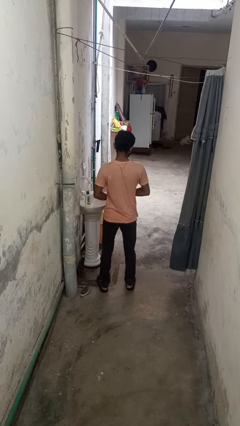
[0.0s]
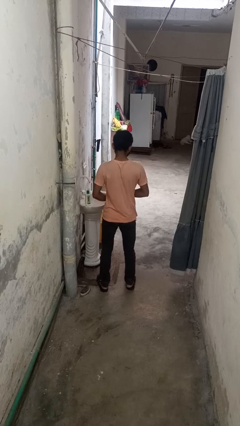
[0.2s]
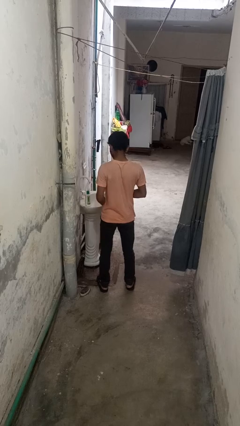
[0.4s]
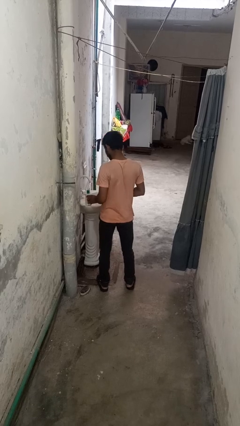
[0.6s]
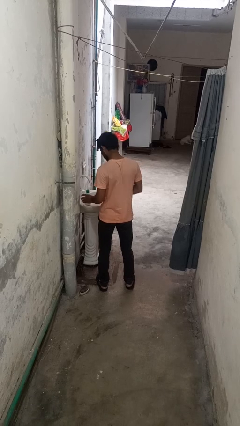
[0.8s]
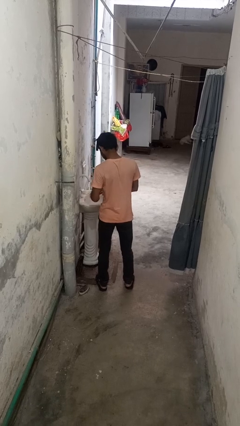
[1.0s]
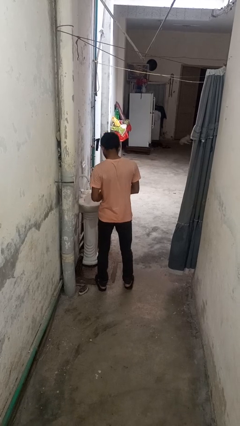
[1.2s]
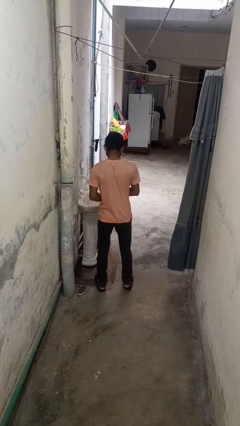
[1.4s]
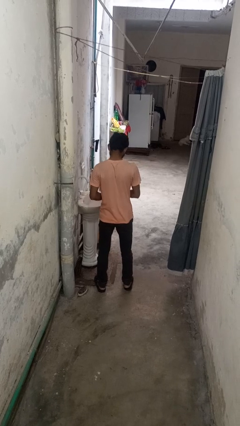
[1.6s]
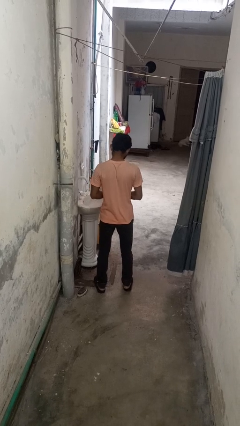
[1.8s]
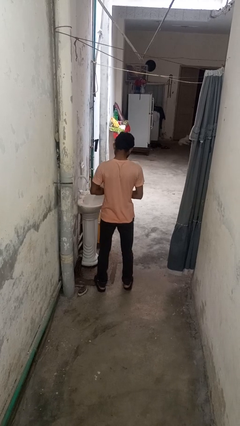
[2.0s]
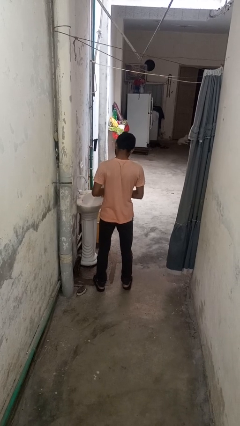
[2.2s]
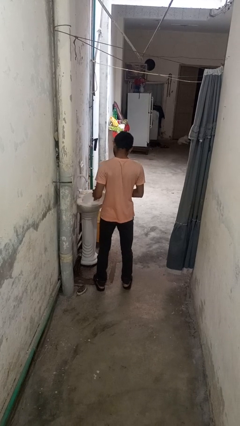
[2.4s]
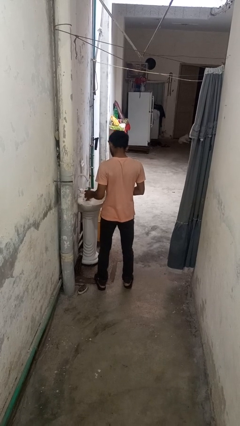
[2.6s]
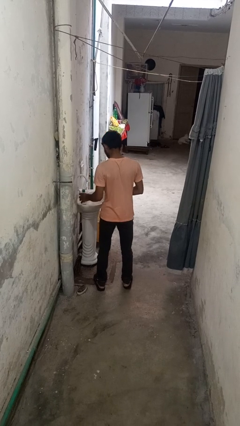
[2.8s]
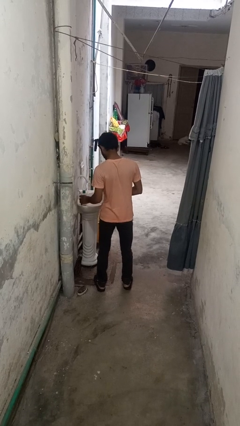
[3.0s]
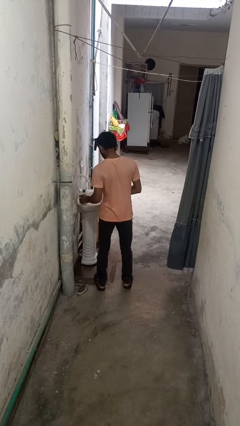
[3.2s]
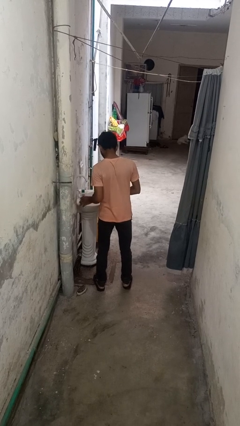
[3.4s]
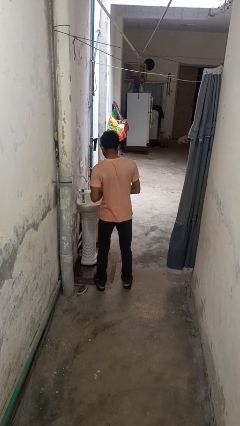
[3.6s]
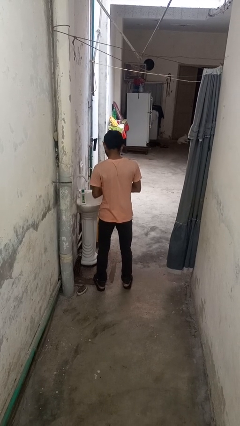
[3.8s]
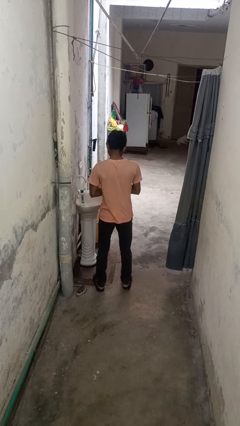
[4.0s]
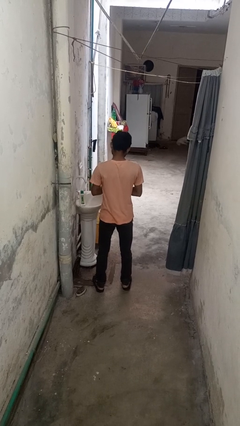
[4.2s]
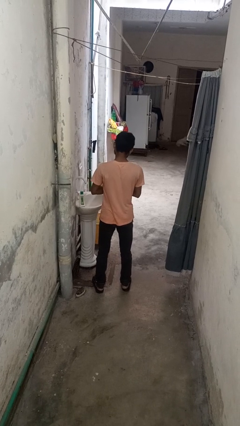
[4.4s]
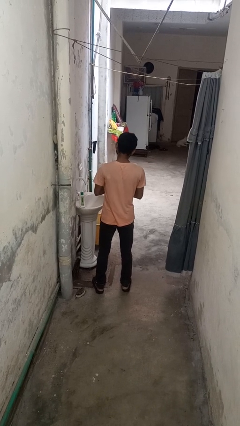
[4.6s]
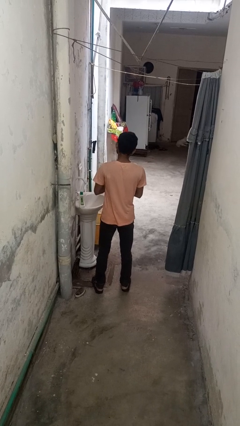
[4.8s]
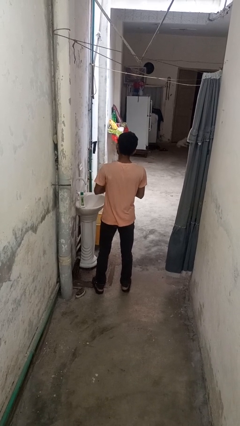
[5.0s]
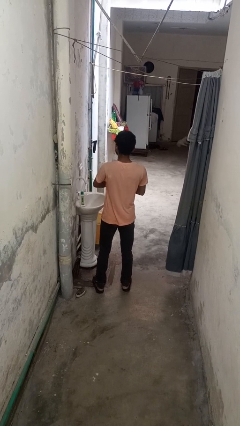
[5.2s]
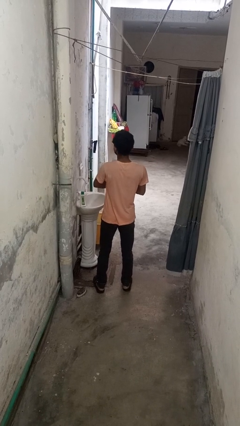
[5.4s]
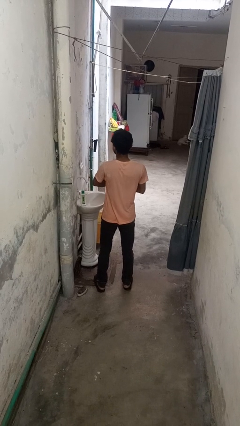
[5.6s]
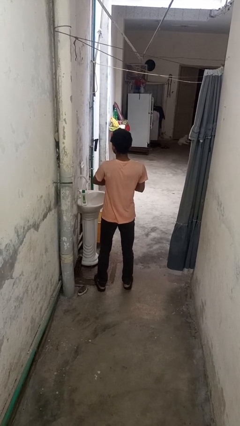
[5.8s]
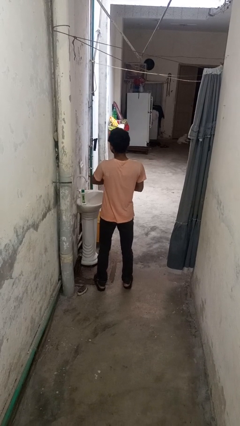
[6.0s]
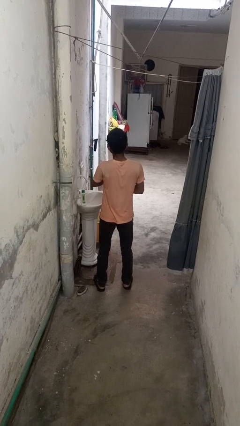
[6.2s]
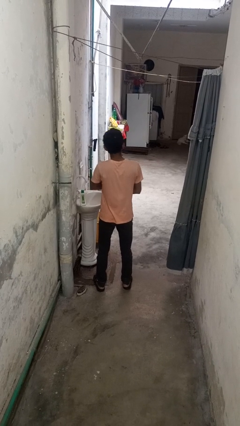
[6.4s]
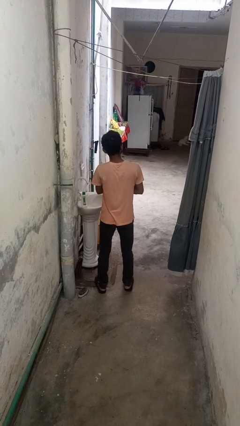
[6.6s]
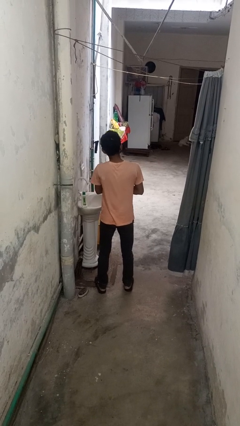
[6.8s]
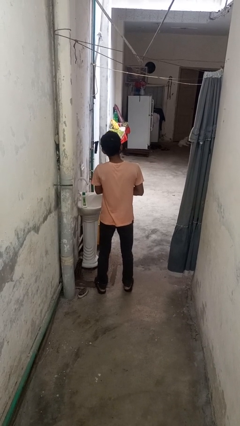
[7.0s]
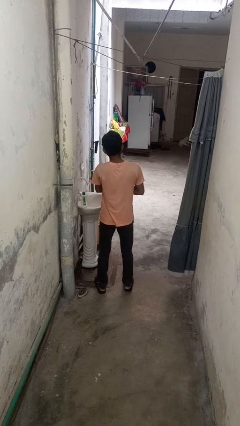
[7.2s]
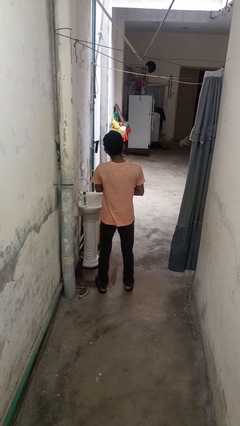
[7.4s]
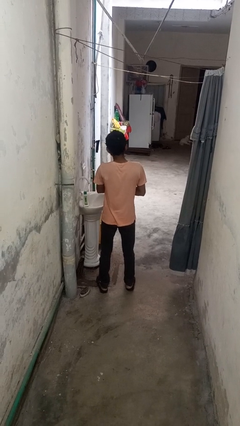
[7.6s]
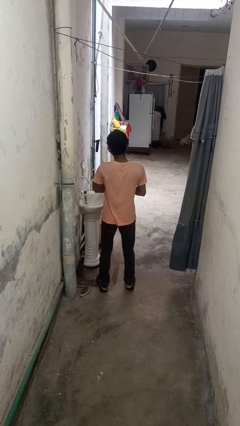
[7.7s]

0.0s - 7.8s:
person applies sunscreen

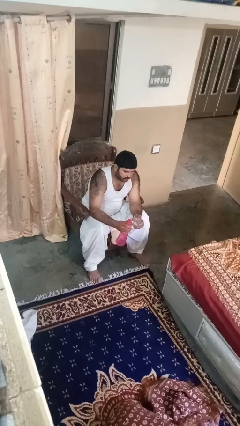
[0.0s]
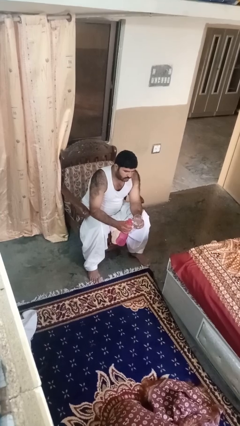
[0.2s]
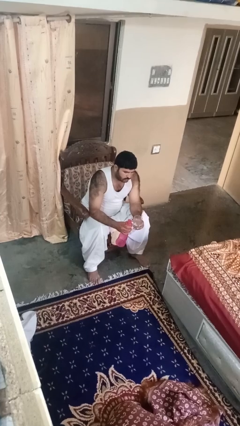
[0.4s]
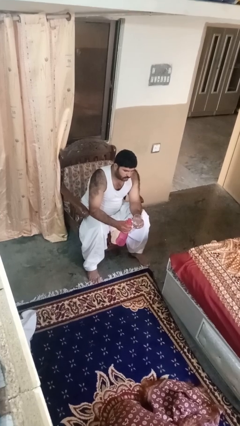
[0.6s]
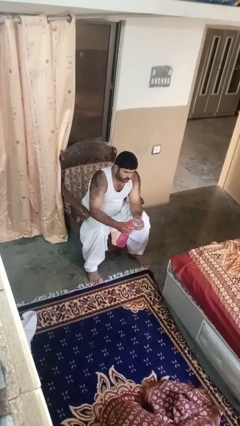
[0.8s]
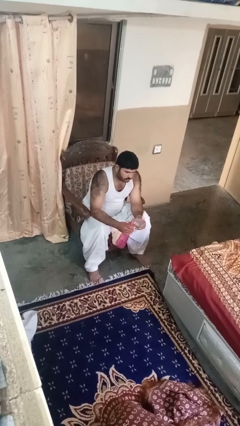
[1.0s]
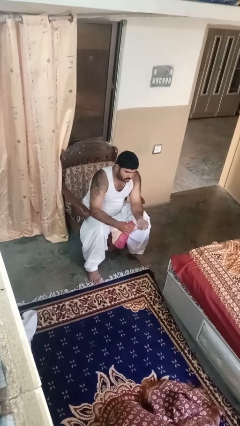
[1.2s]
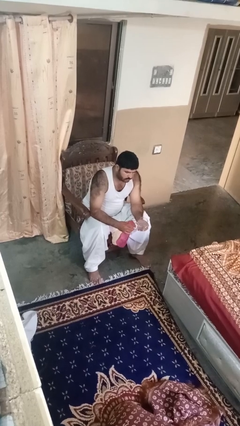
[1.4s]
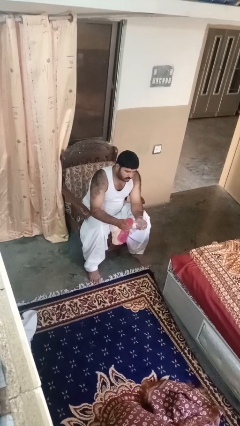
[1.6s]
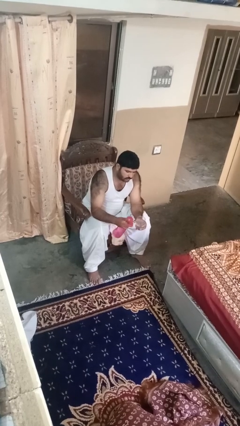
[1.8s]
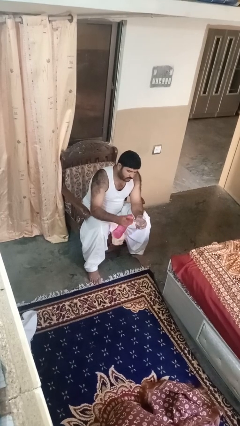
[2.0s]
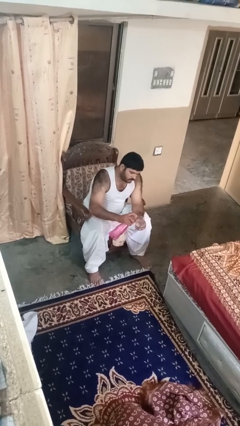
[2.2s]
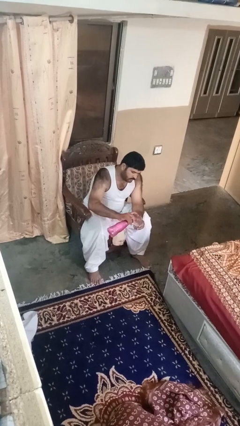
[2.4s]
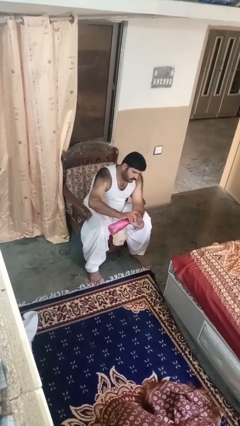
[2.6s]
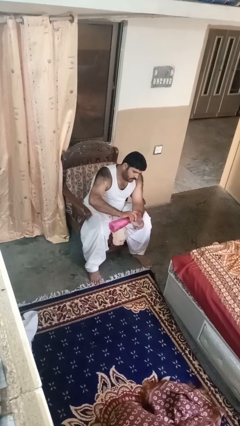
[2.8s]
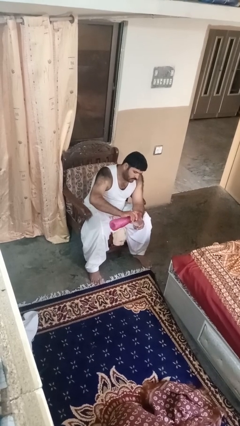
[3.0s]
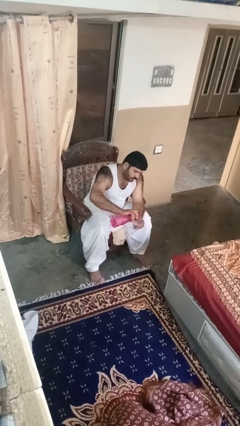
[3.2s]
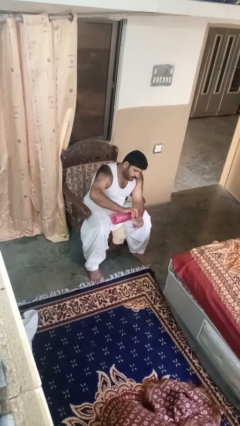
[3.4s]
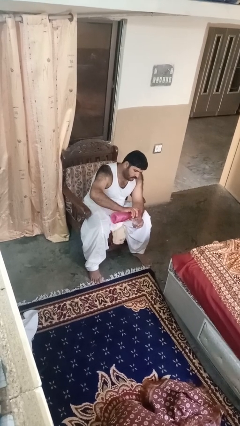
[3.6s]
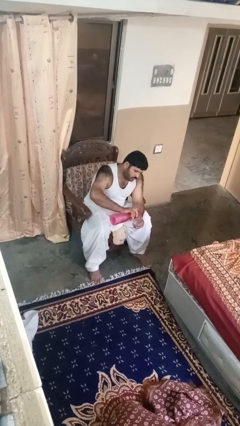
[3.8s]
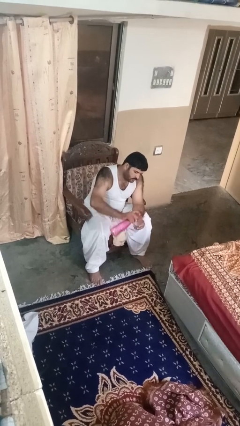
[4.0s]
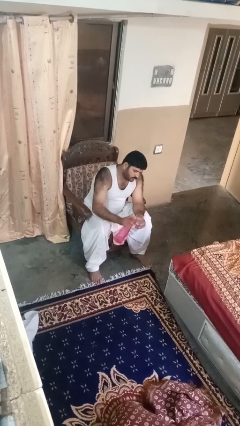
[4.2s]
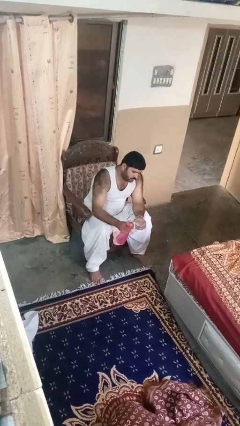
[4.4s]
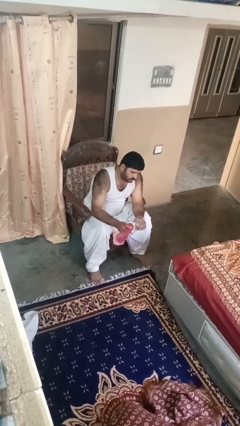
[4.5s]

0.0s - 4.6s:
person pours liquid into cup

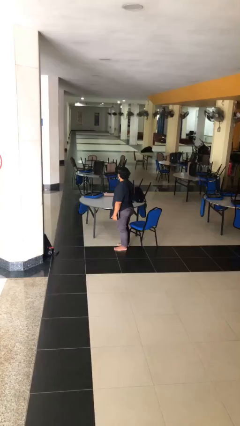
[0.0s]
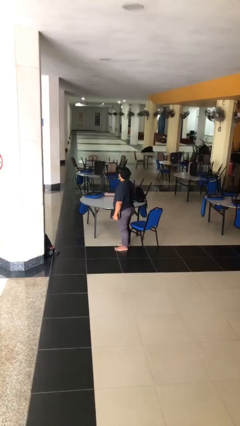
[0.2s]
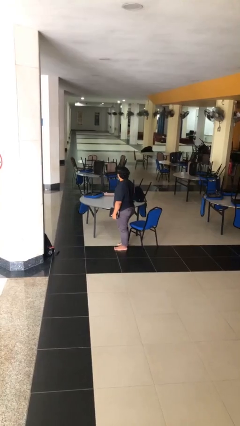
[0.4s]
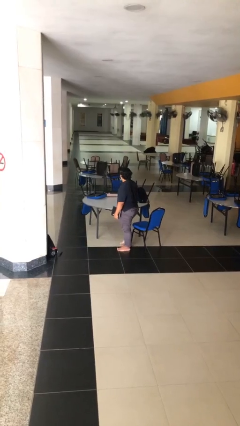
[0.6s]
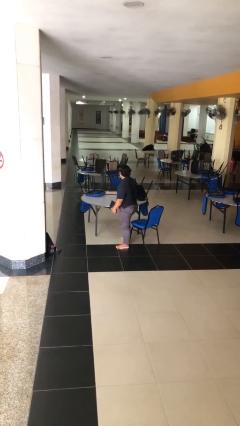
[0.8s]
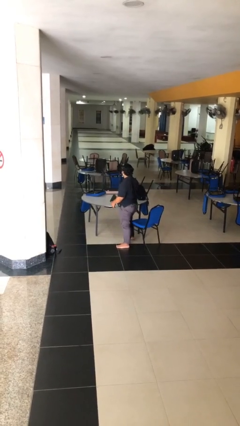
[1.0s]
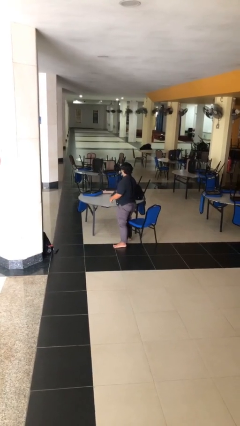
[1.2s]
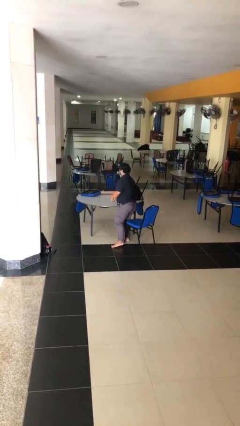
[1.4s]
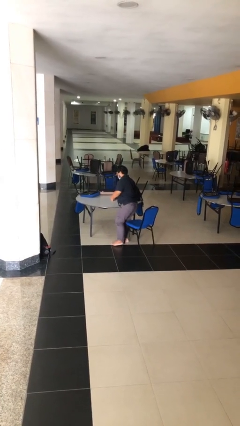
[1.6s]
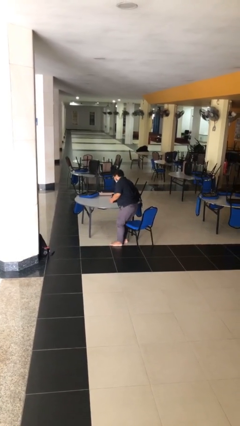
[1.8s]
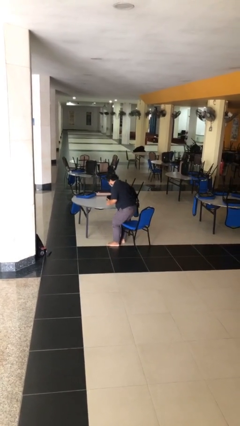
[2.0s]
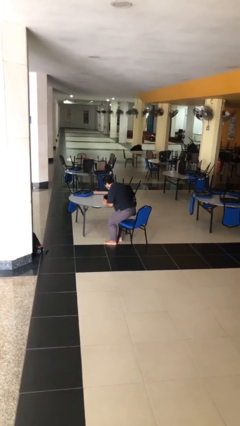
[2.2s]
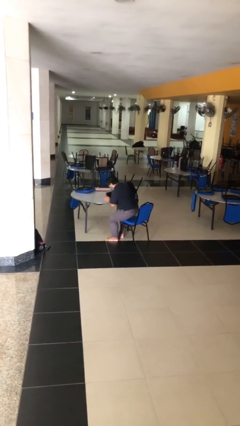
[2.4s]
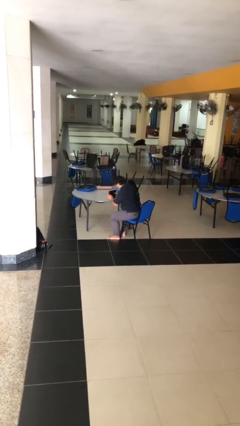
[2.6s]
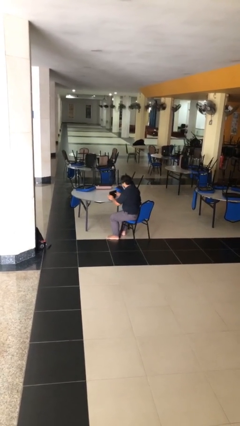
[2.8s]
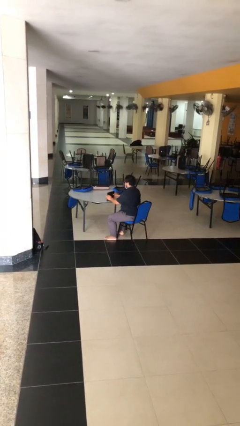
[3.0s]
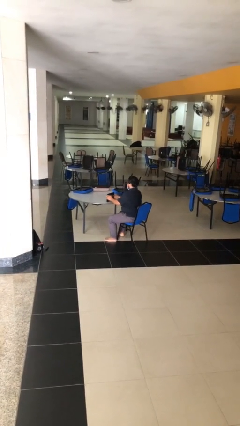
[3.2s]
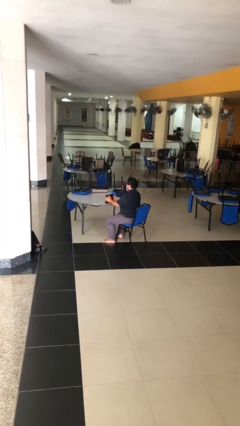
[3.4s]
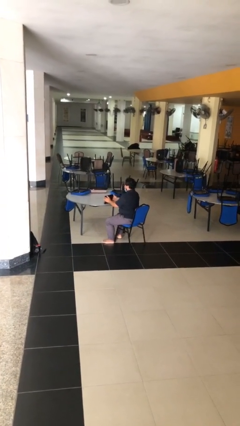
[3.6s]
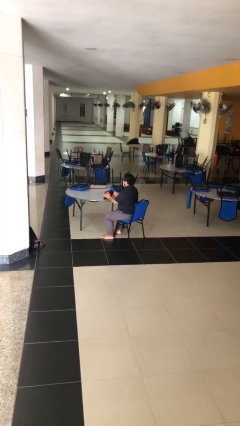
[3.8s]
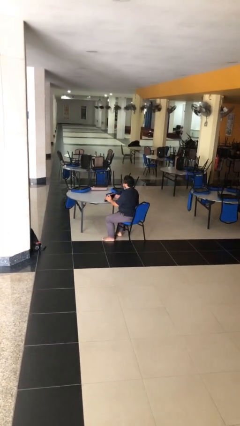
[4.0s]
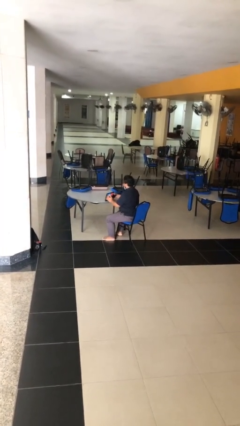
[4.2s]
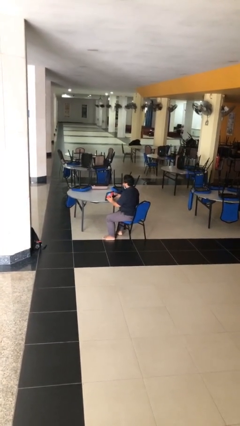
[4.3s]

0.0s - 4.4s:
person sits down

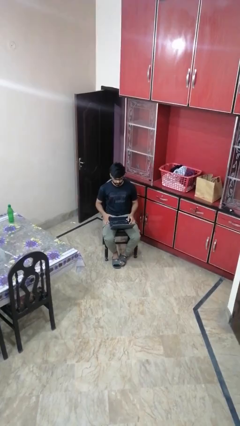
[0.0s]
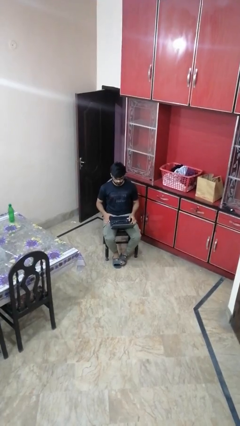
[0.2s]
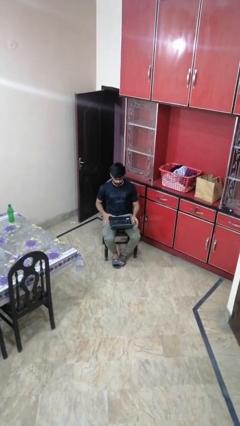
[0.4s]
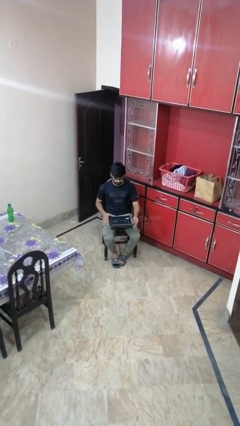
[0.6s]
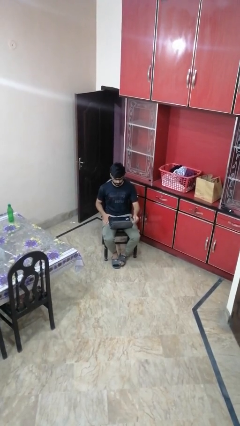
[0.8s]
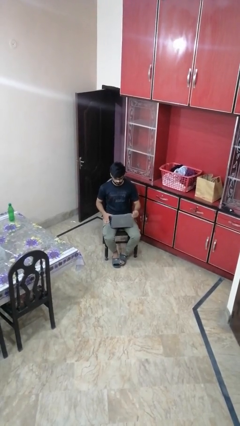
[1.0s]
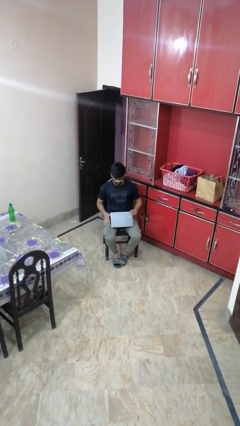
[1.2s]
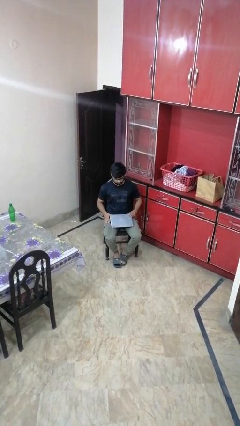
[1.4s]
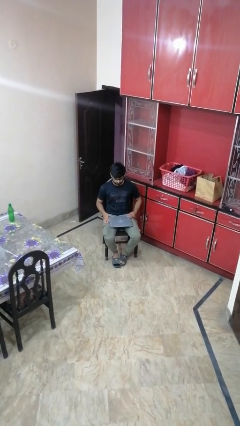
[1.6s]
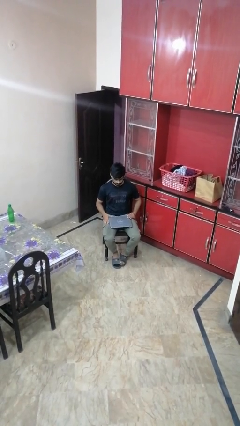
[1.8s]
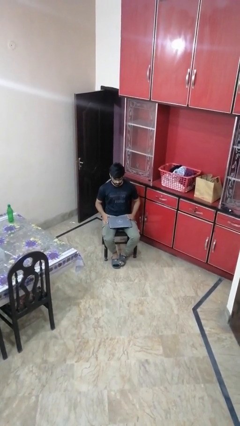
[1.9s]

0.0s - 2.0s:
person closes laptop
